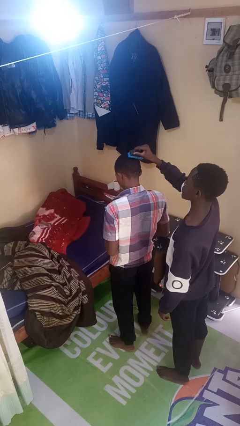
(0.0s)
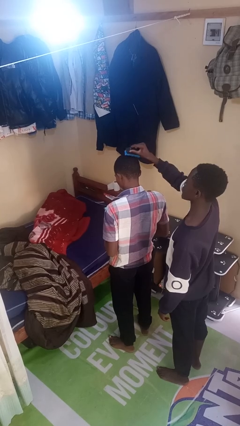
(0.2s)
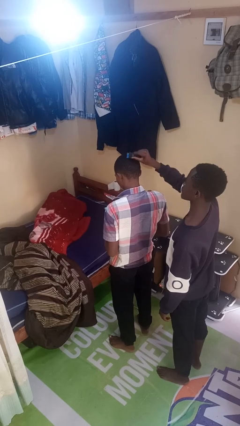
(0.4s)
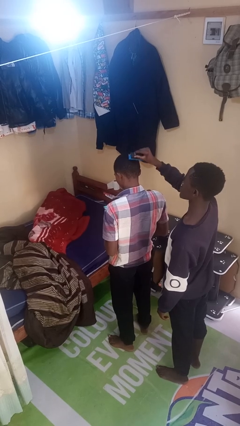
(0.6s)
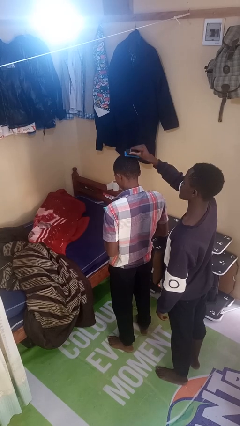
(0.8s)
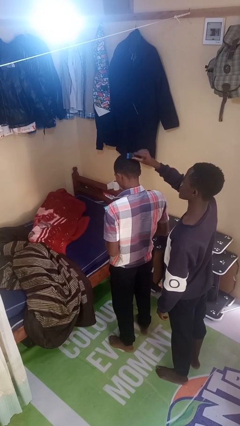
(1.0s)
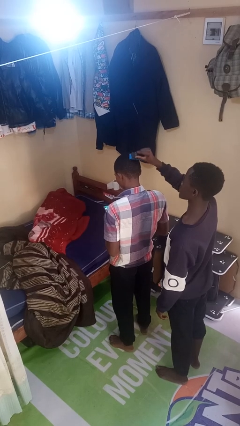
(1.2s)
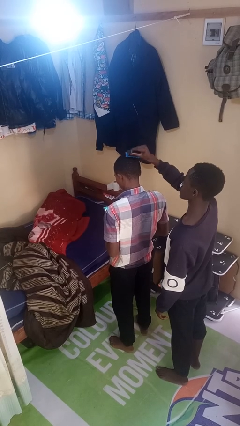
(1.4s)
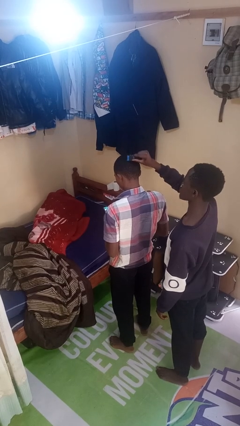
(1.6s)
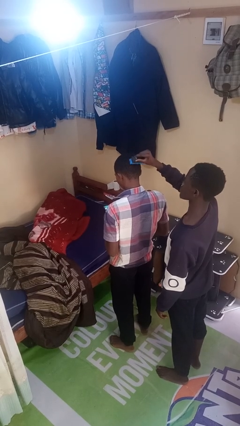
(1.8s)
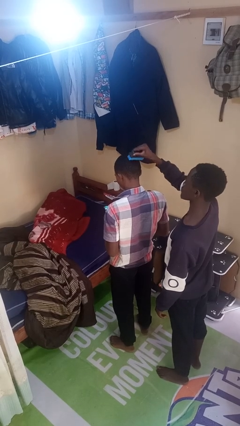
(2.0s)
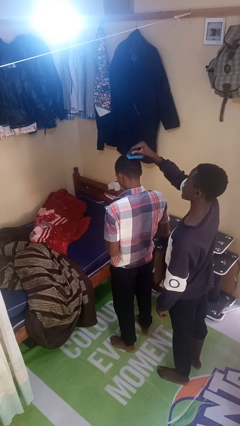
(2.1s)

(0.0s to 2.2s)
person brushes hair of person

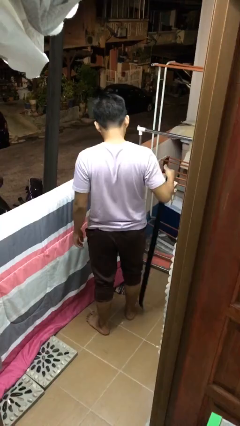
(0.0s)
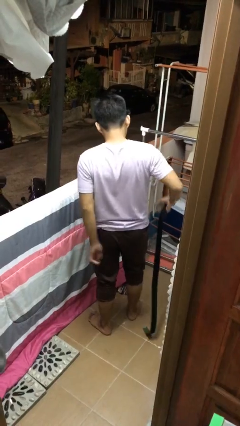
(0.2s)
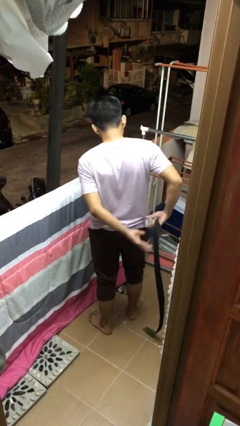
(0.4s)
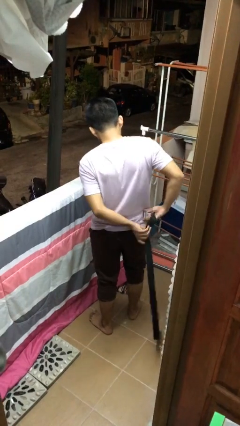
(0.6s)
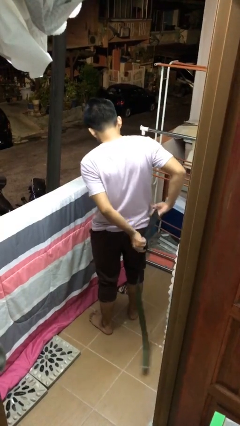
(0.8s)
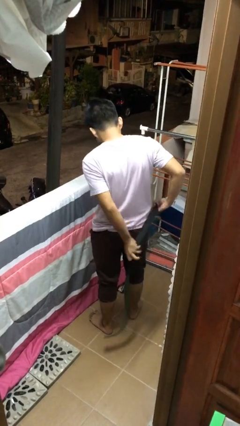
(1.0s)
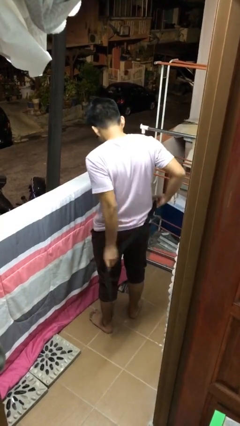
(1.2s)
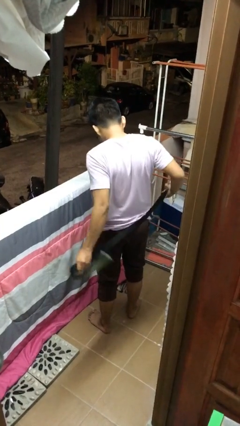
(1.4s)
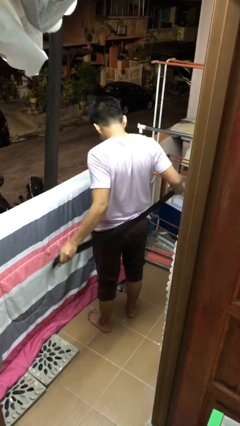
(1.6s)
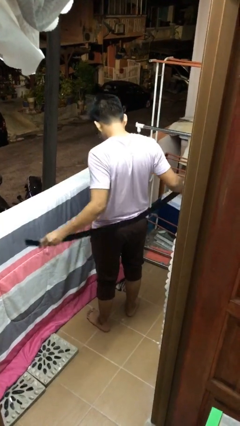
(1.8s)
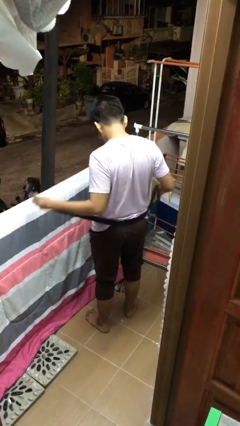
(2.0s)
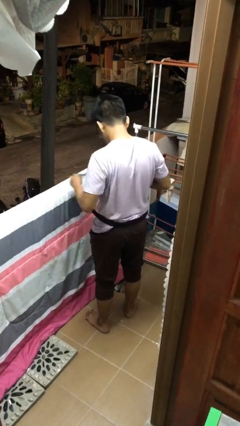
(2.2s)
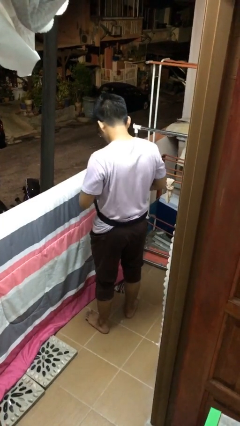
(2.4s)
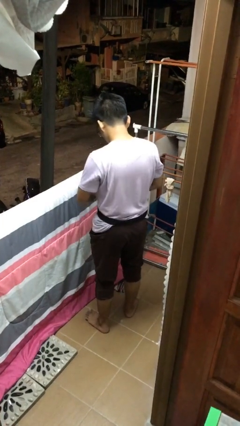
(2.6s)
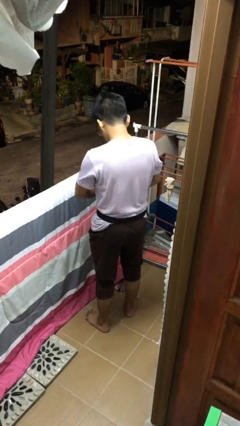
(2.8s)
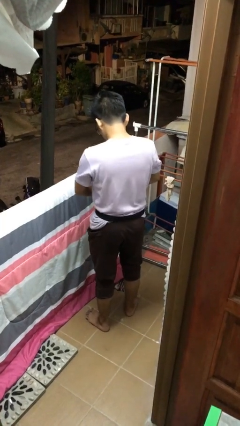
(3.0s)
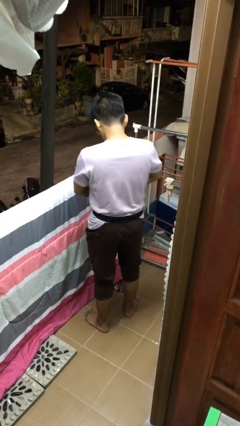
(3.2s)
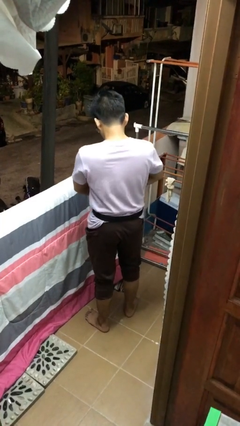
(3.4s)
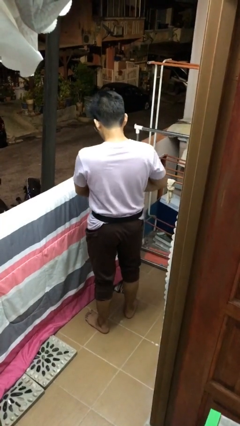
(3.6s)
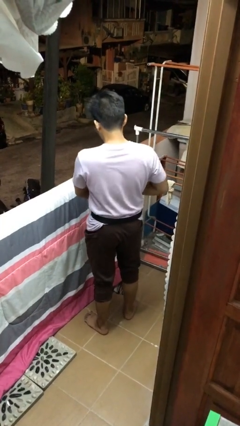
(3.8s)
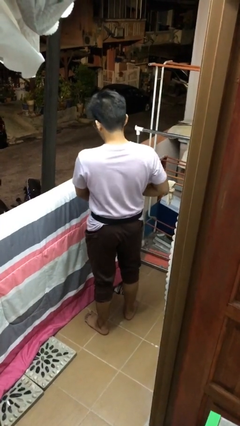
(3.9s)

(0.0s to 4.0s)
person puts on belt

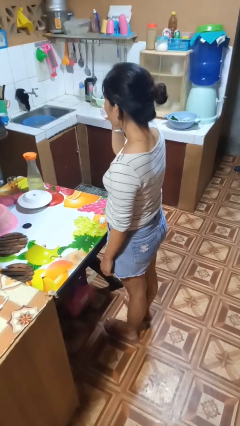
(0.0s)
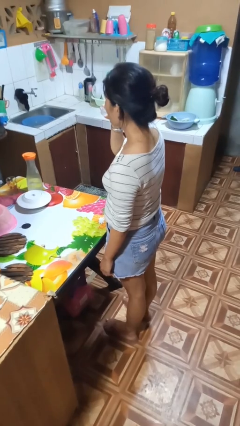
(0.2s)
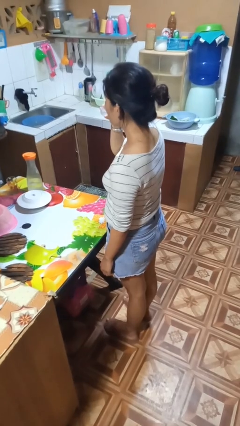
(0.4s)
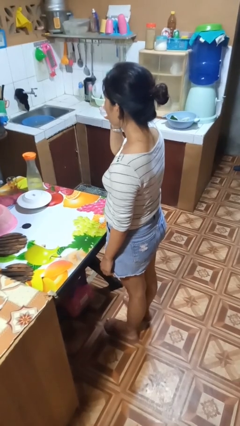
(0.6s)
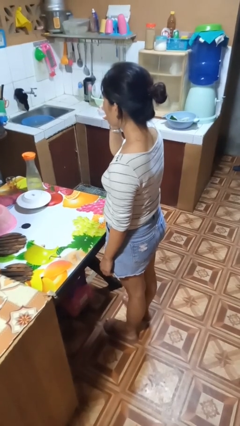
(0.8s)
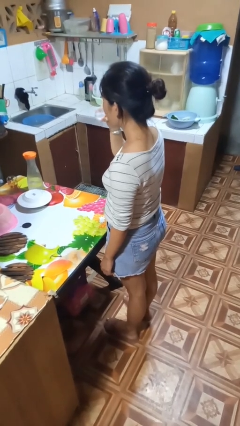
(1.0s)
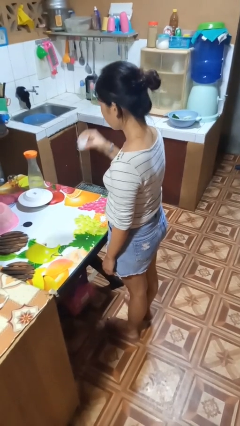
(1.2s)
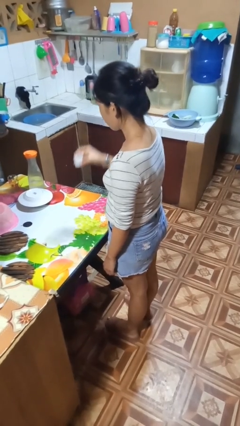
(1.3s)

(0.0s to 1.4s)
person drinks from shotglass

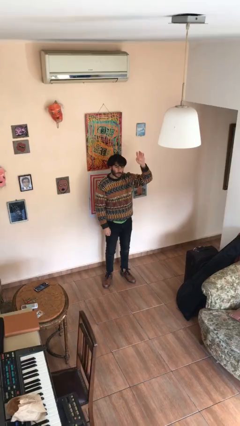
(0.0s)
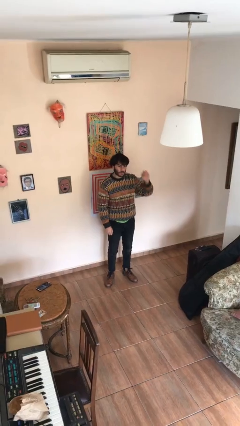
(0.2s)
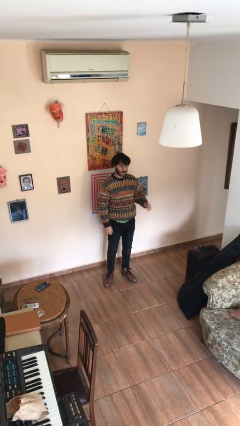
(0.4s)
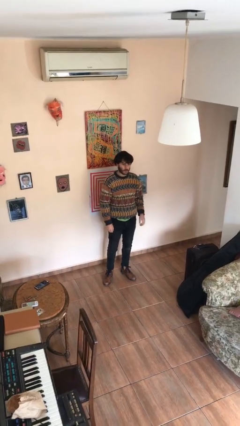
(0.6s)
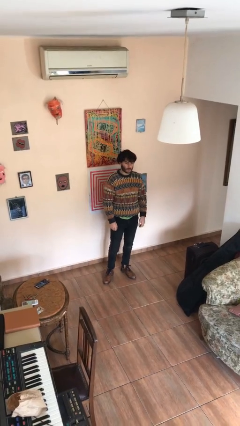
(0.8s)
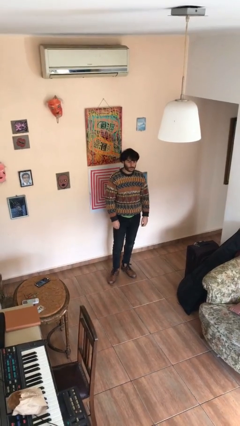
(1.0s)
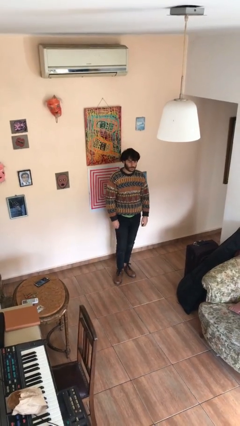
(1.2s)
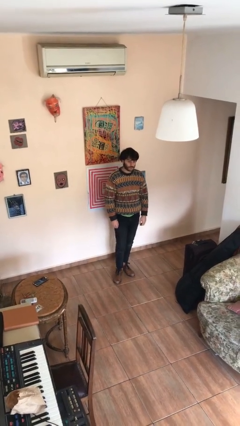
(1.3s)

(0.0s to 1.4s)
person gestures lower hand

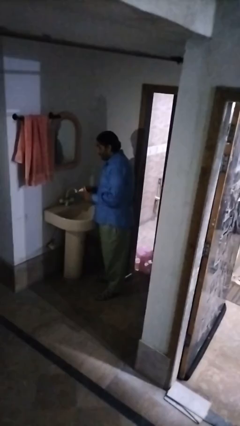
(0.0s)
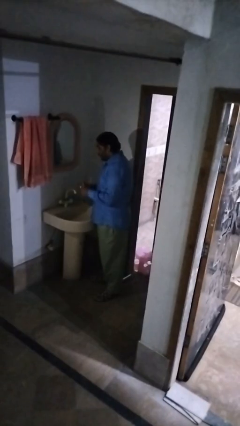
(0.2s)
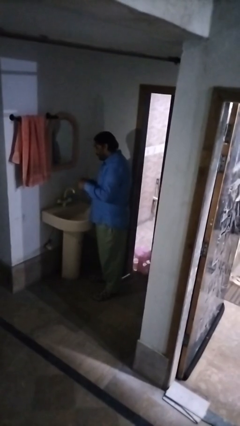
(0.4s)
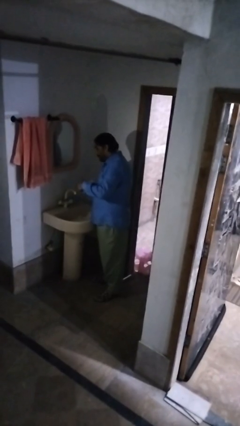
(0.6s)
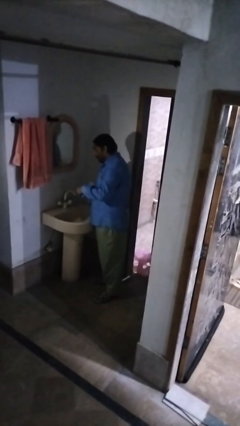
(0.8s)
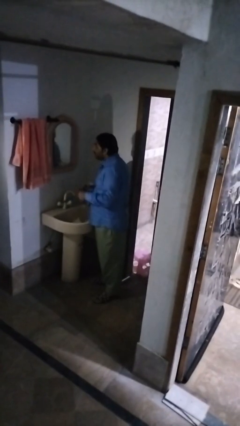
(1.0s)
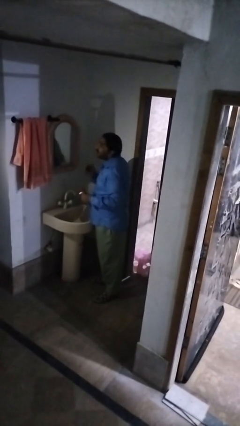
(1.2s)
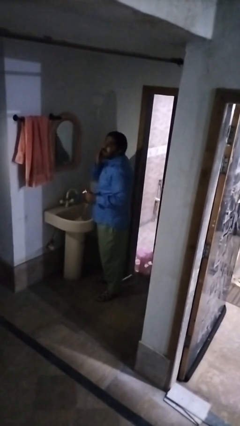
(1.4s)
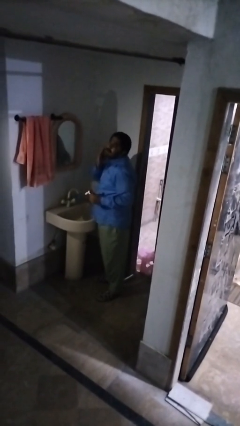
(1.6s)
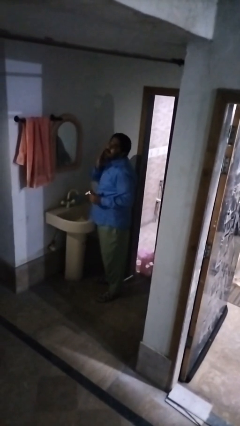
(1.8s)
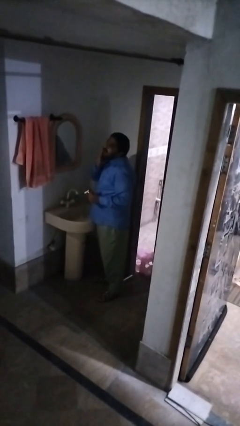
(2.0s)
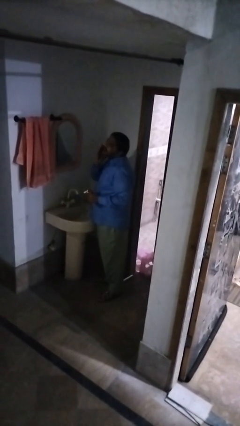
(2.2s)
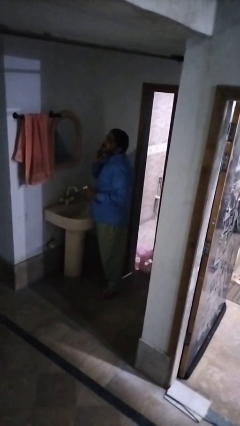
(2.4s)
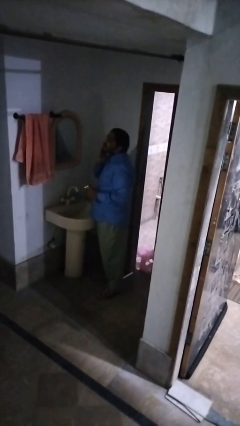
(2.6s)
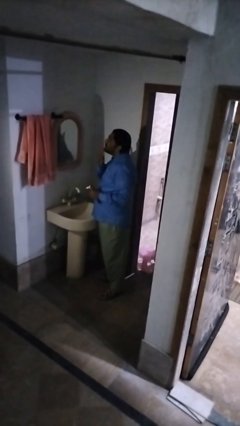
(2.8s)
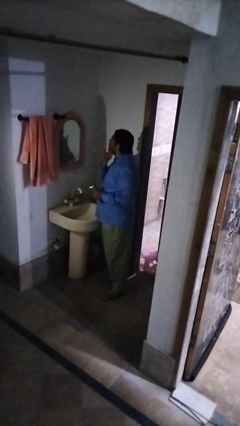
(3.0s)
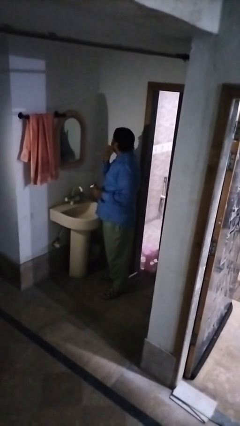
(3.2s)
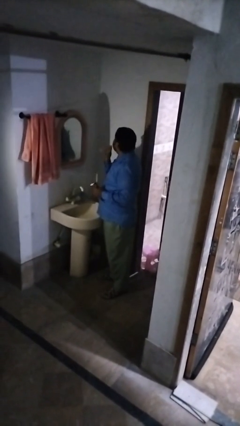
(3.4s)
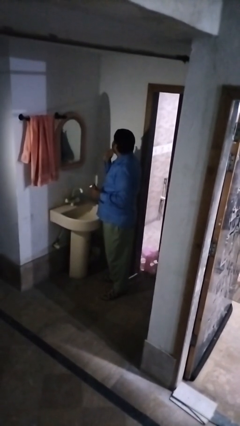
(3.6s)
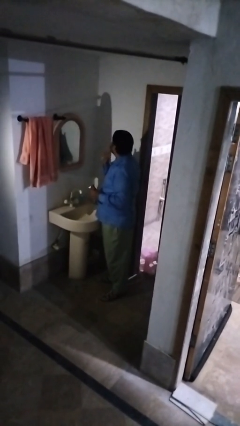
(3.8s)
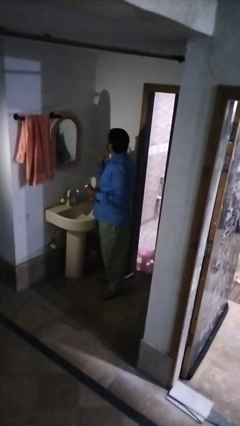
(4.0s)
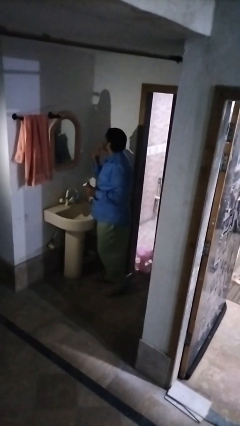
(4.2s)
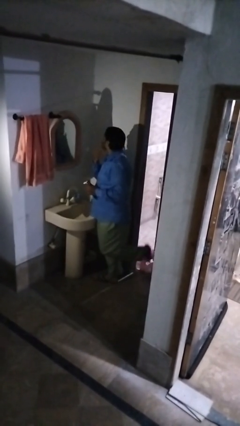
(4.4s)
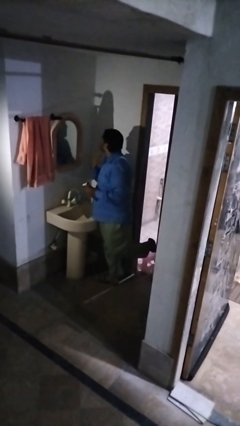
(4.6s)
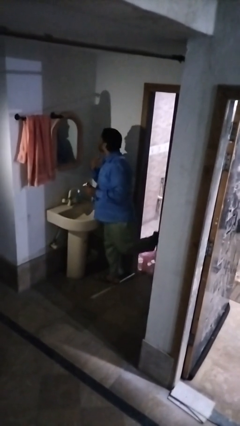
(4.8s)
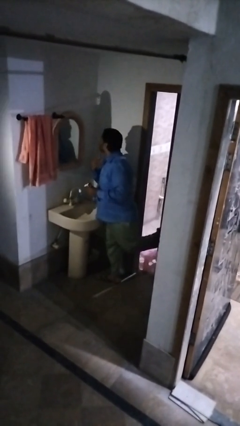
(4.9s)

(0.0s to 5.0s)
person applies shaving cream

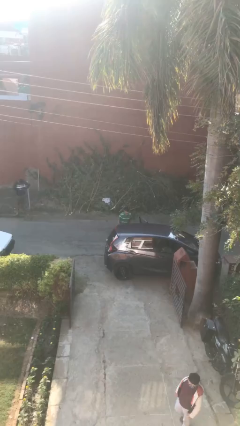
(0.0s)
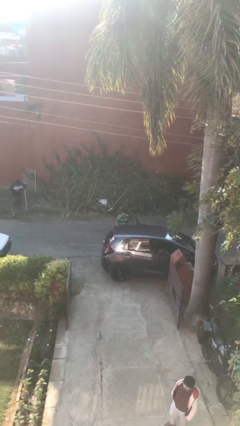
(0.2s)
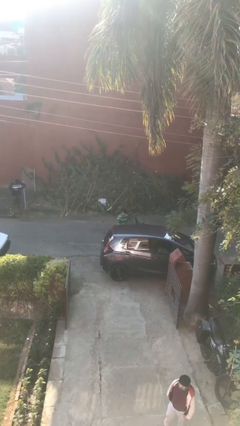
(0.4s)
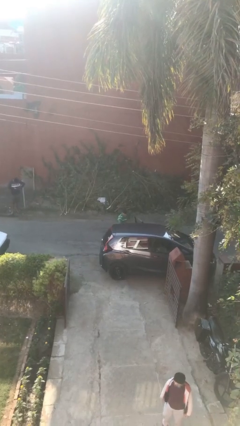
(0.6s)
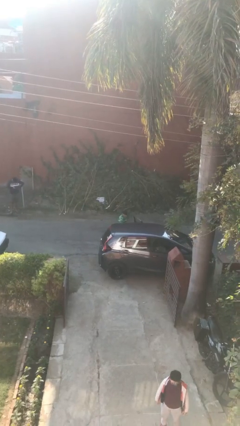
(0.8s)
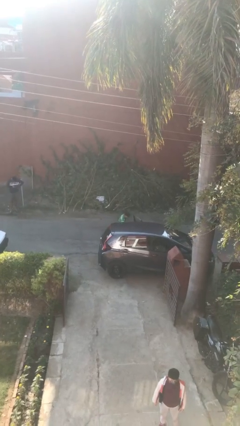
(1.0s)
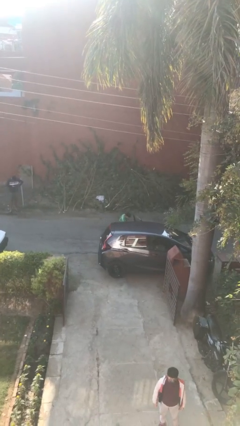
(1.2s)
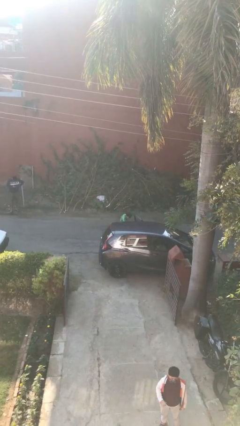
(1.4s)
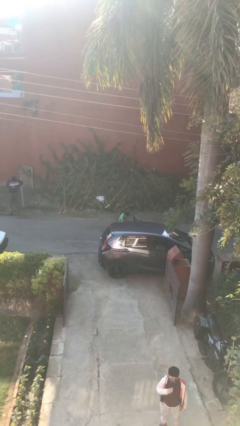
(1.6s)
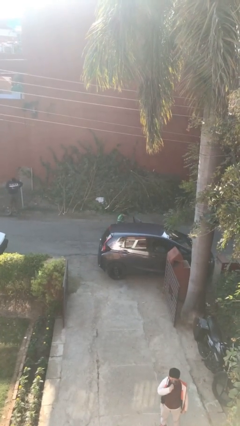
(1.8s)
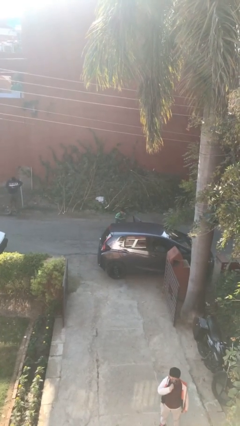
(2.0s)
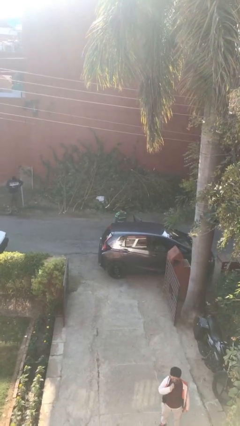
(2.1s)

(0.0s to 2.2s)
person loads car

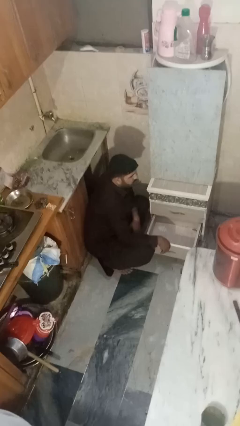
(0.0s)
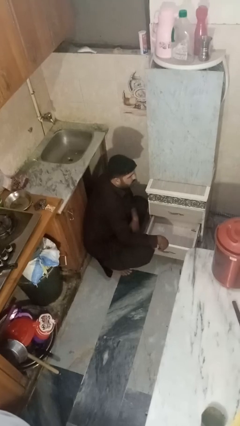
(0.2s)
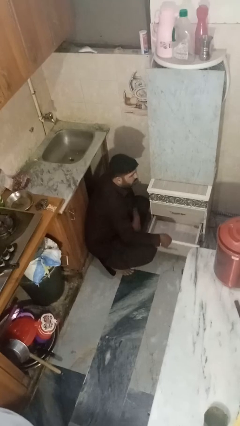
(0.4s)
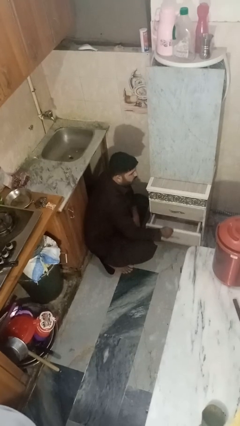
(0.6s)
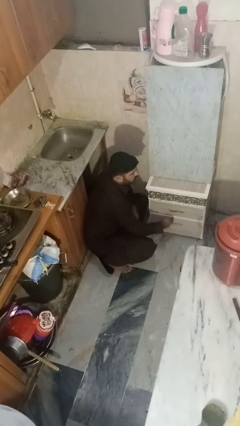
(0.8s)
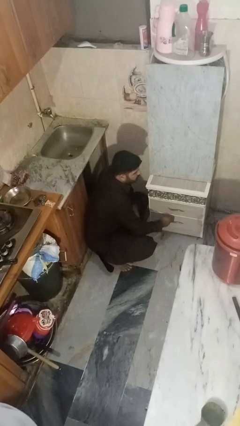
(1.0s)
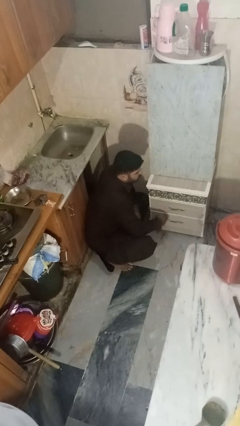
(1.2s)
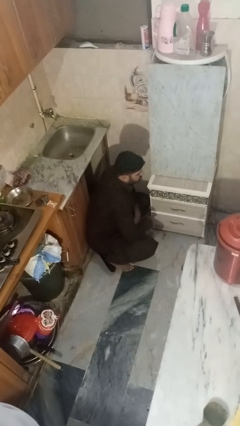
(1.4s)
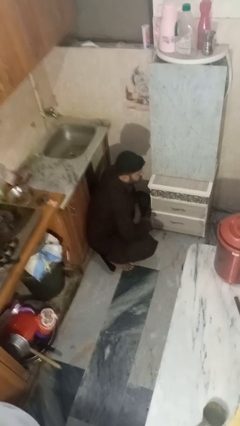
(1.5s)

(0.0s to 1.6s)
person closes kitchen drawer
